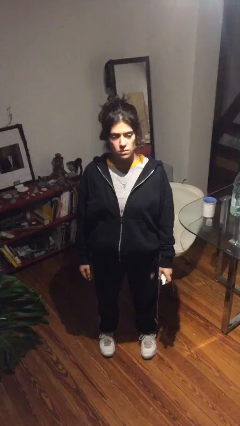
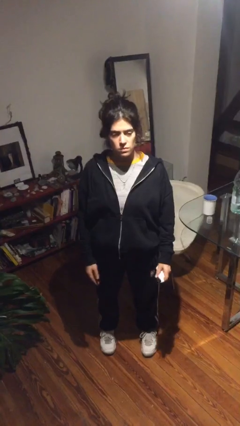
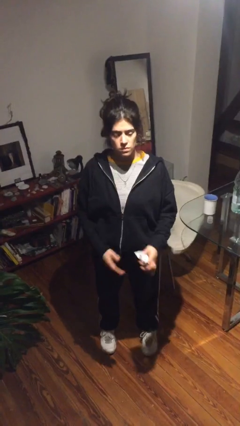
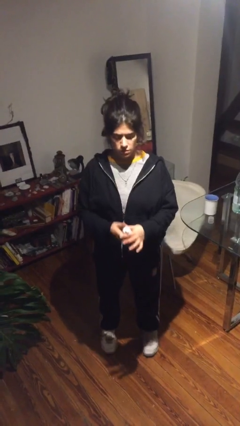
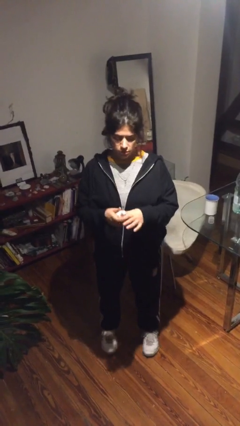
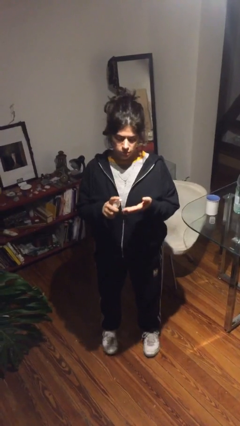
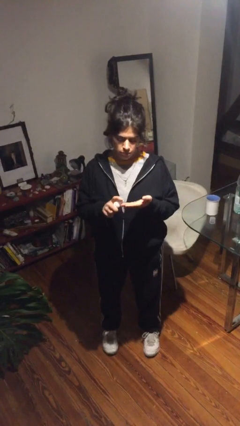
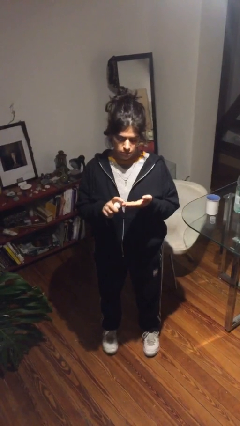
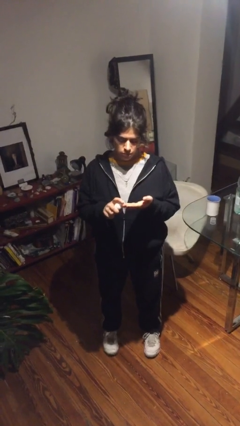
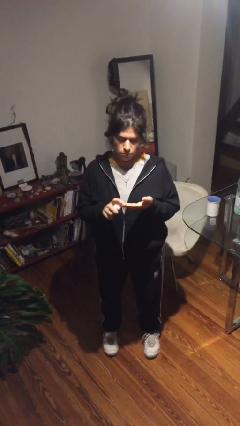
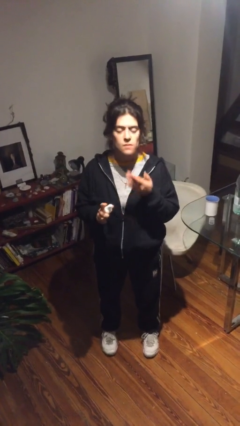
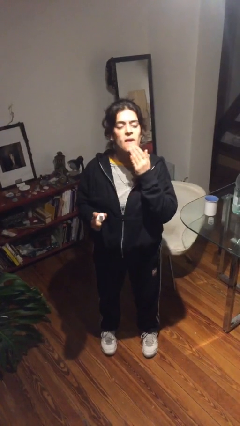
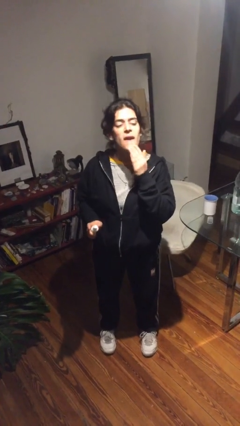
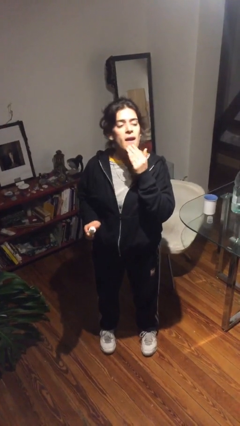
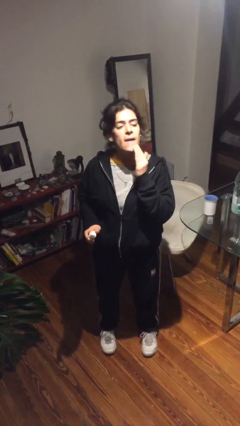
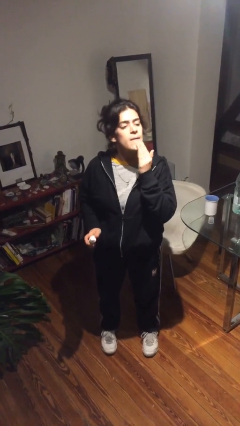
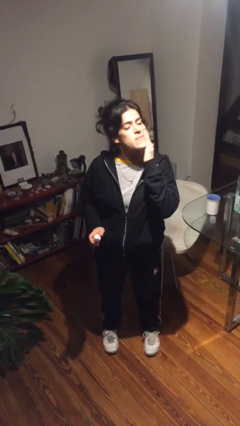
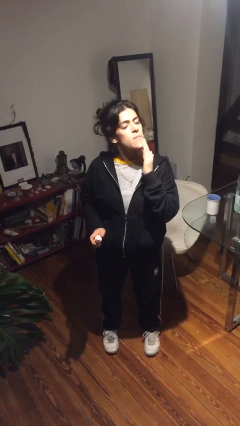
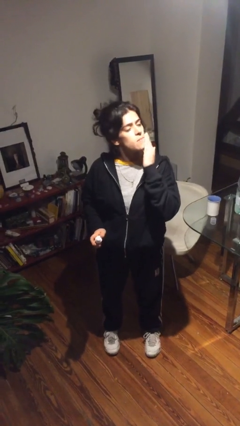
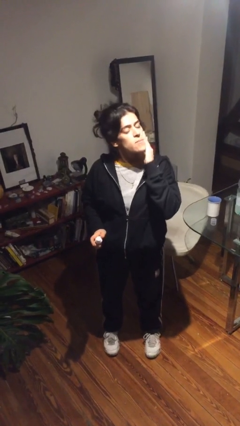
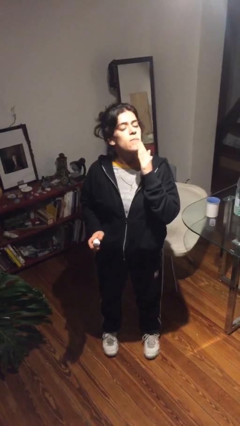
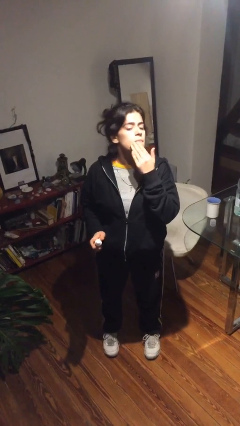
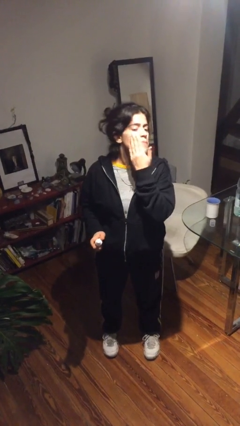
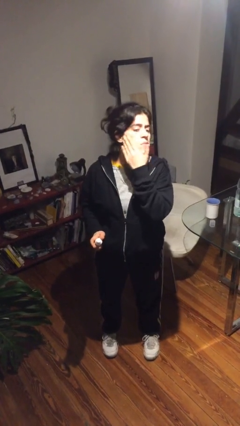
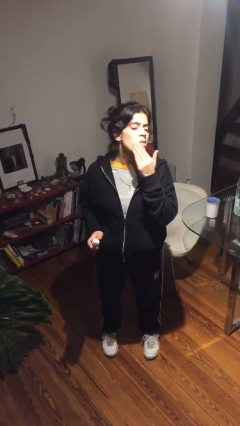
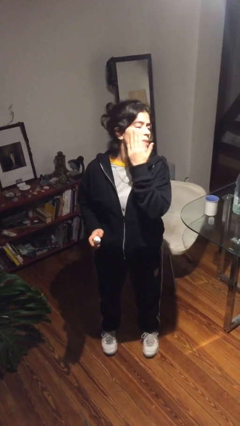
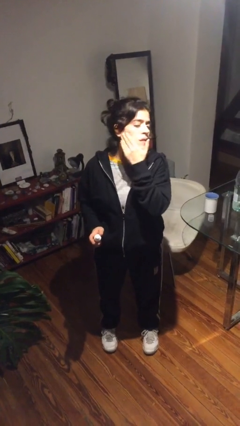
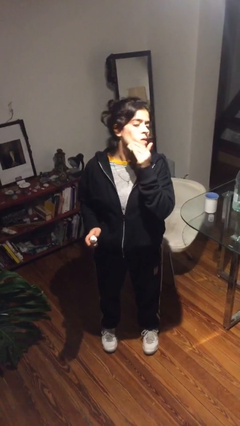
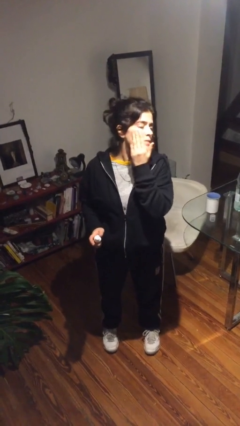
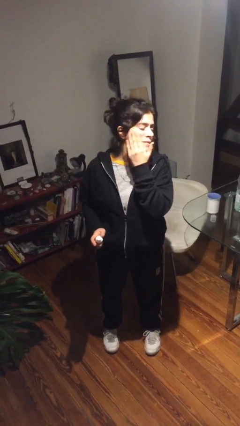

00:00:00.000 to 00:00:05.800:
person applies facial moisturizer

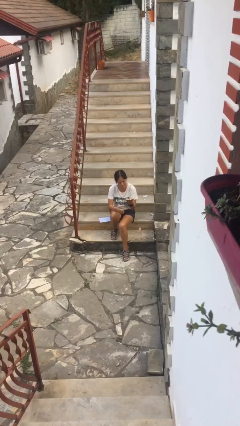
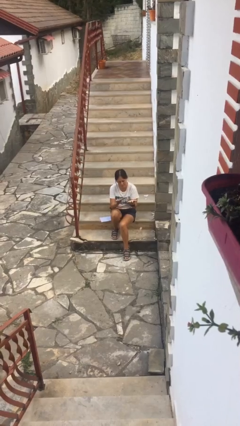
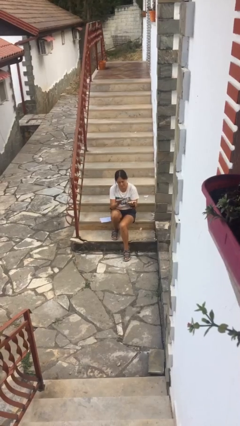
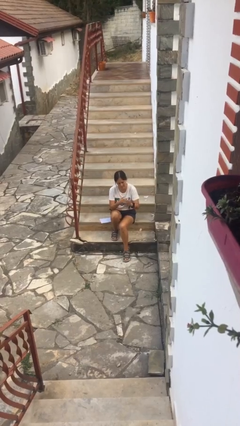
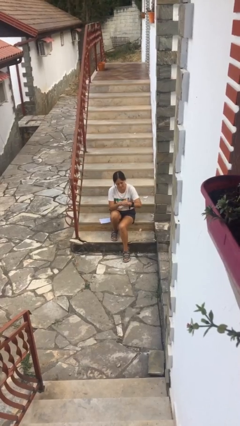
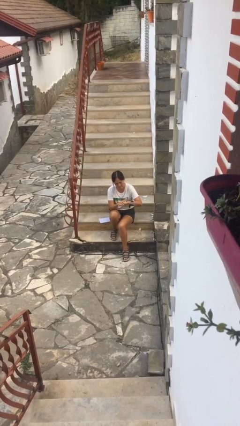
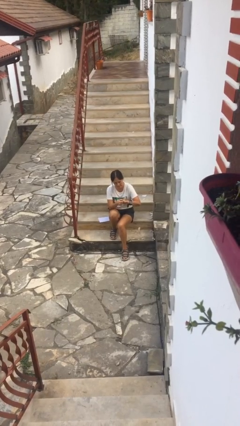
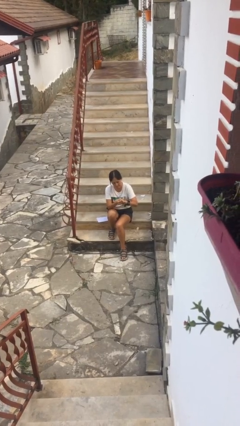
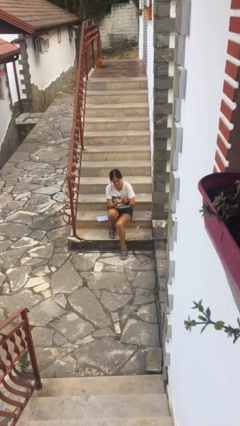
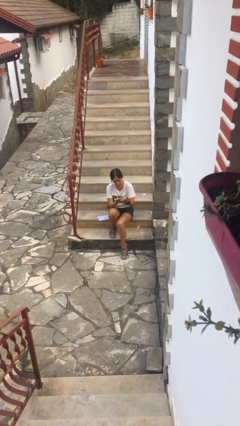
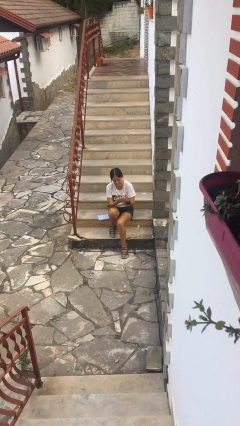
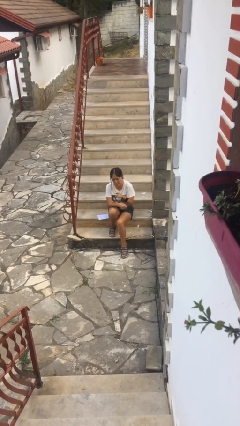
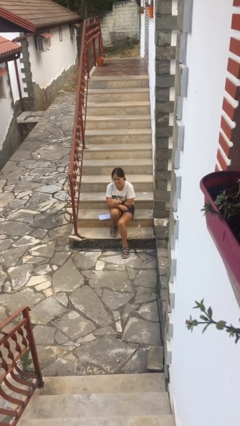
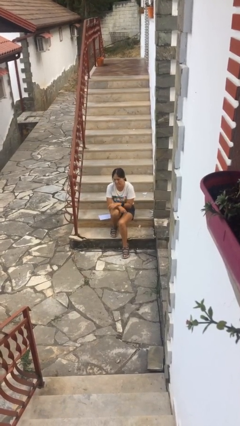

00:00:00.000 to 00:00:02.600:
person looks at hands in lap

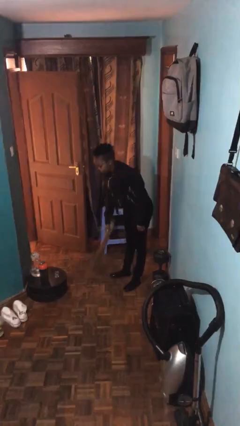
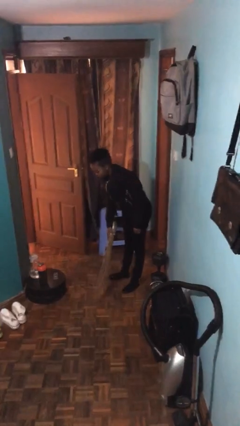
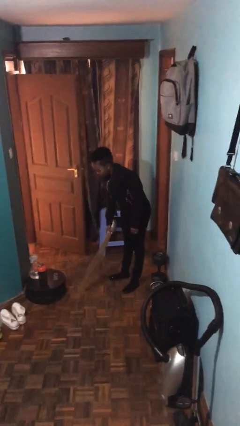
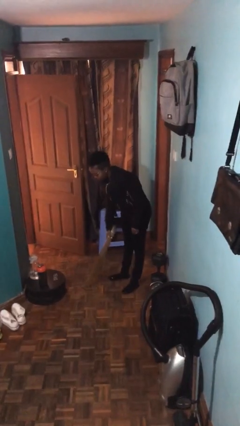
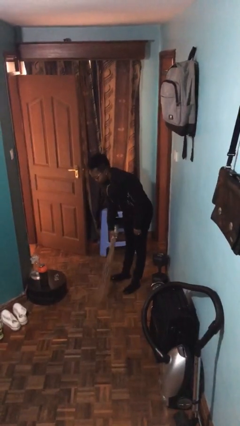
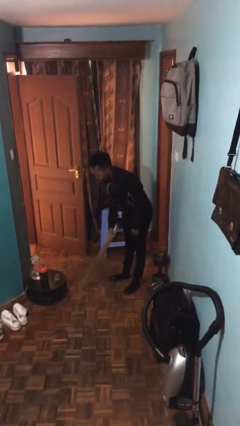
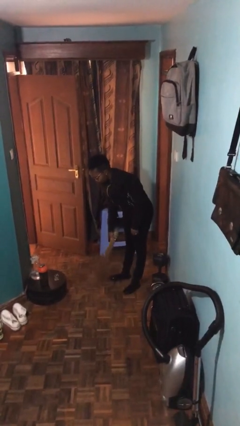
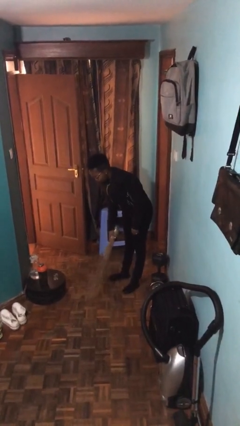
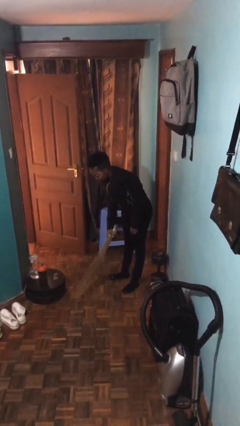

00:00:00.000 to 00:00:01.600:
person sweeps floor

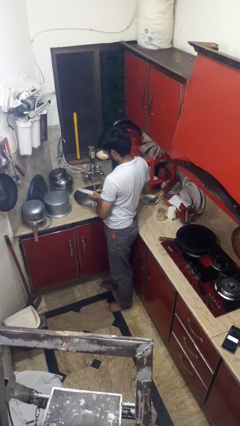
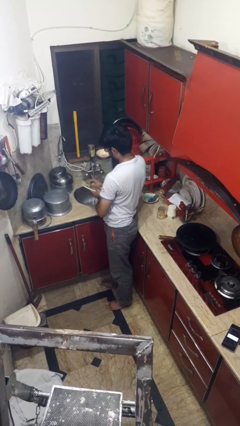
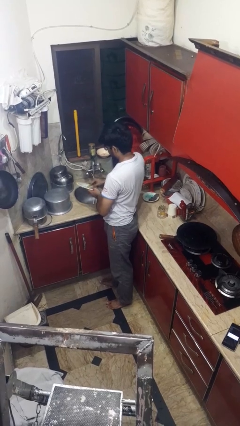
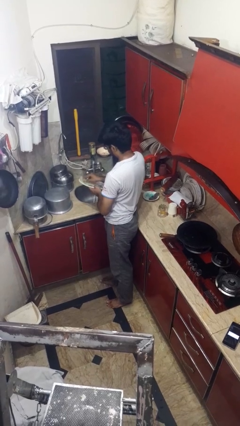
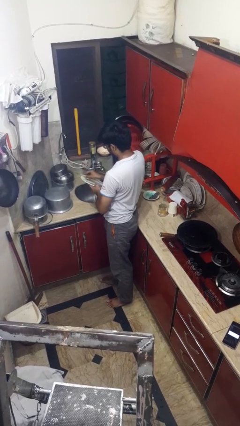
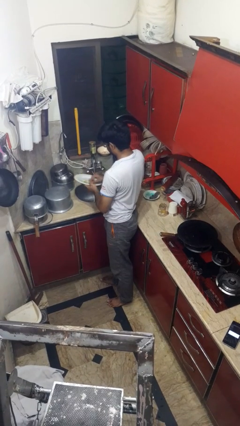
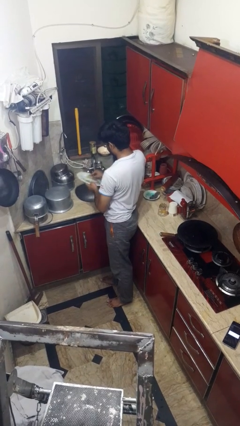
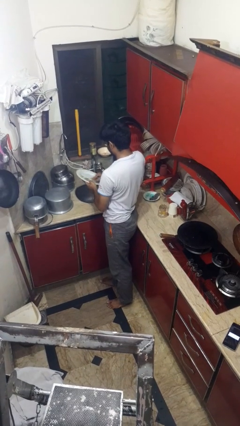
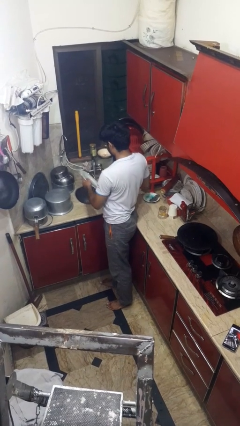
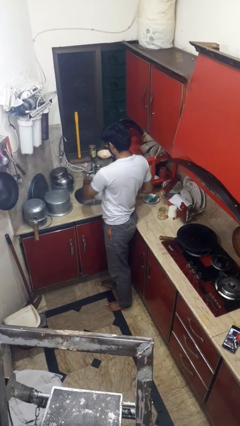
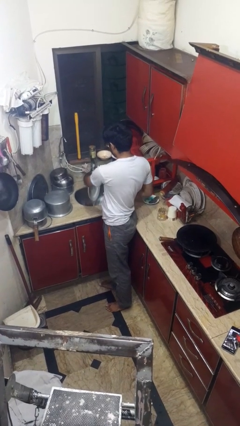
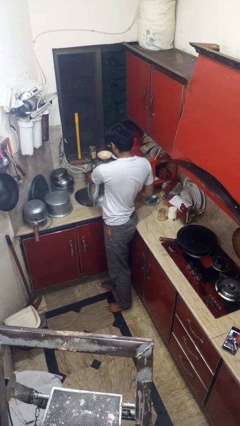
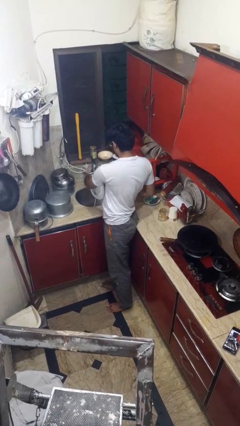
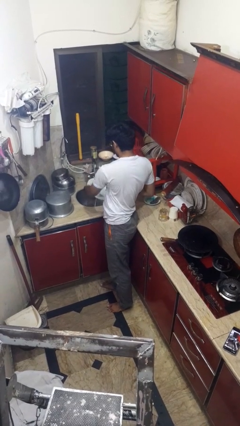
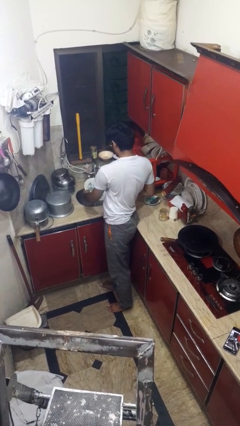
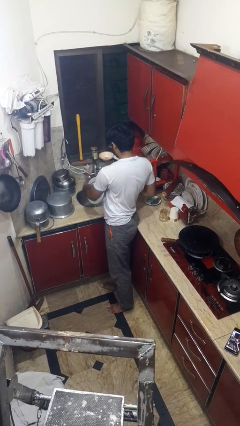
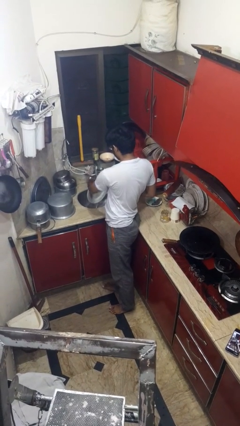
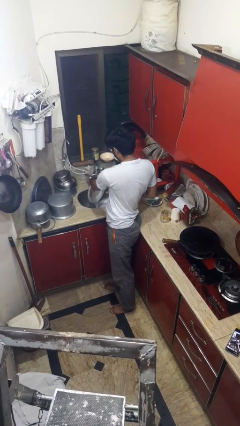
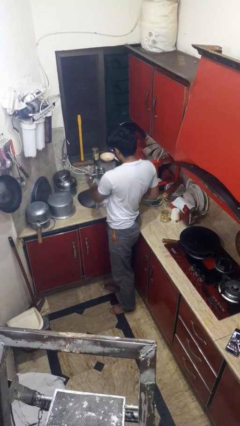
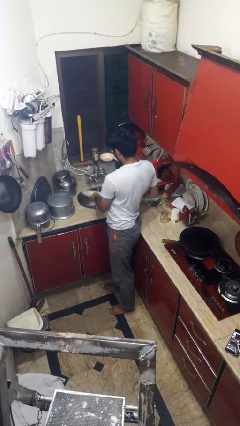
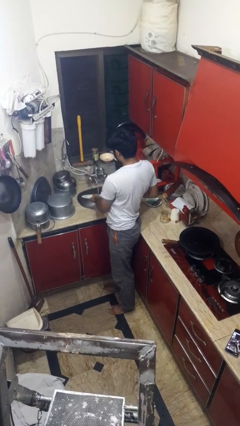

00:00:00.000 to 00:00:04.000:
person washes dish

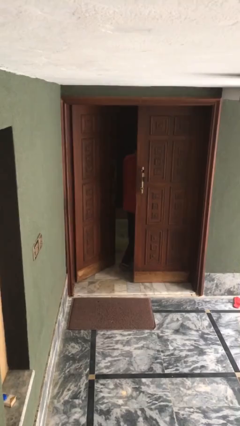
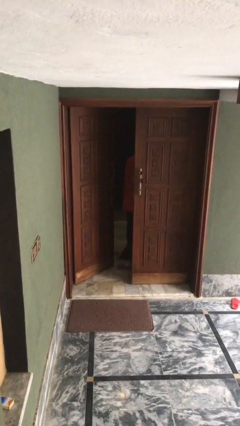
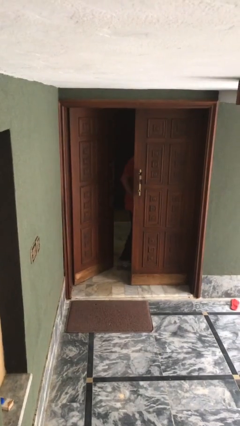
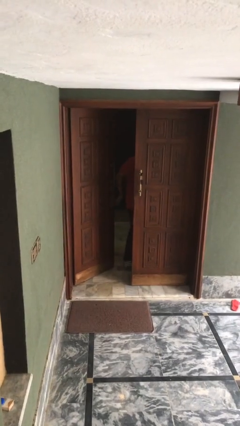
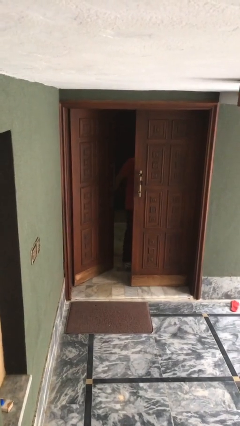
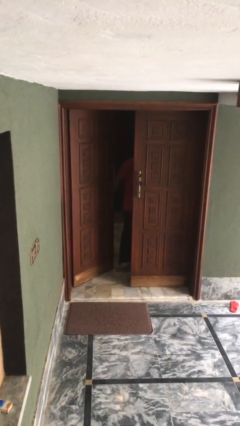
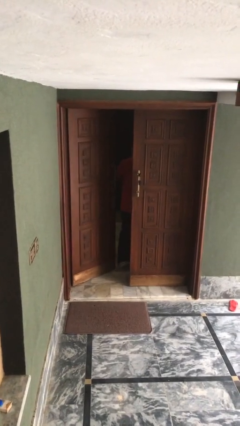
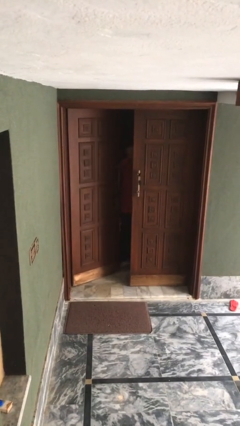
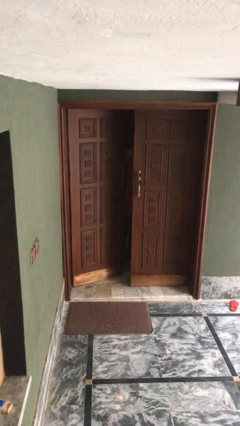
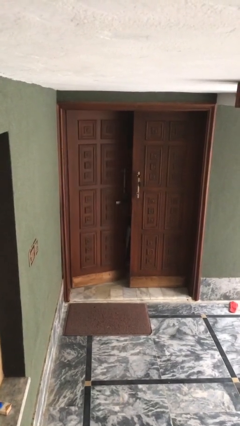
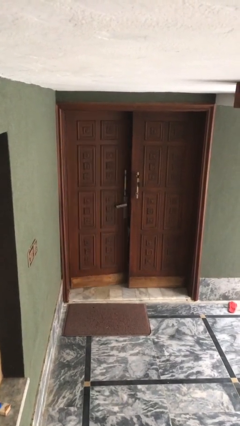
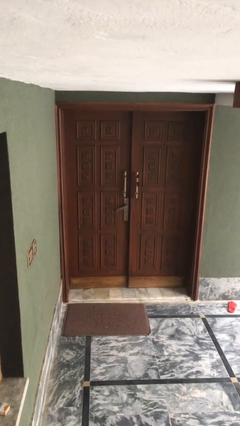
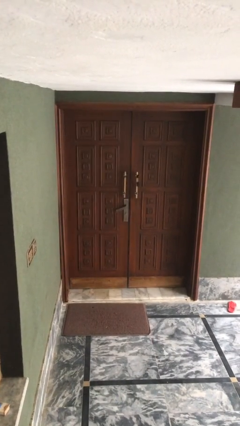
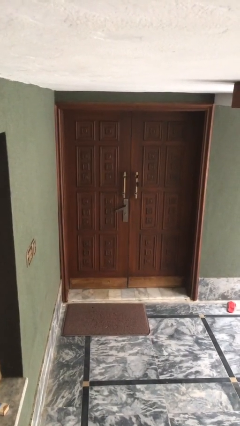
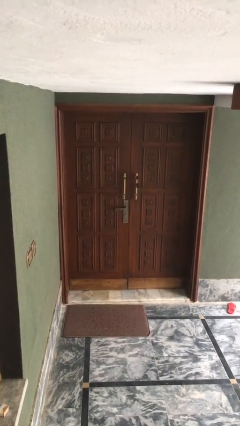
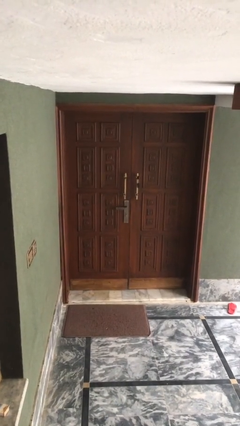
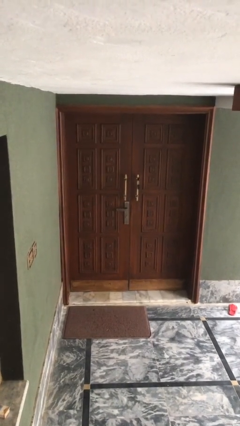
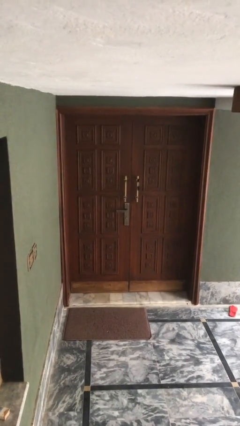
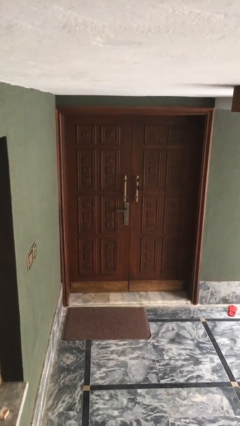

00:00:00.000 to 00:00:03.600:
person closes facility door
